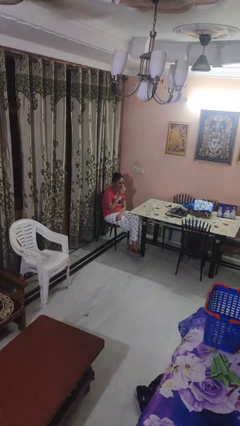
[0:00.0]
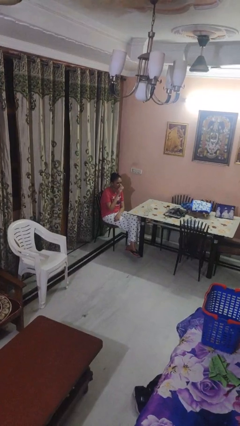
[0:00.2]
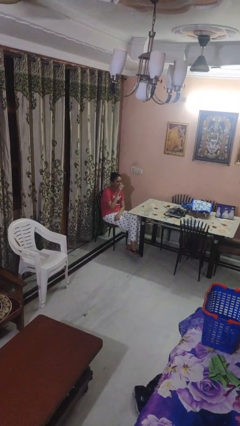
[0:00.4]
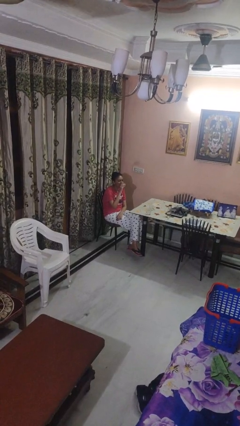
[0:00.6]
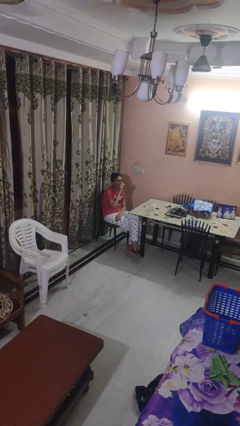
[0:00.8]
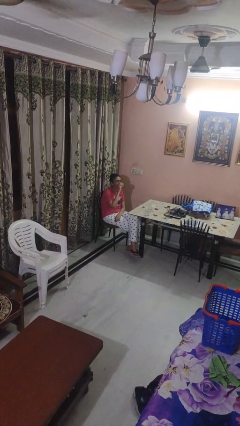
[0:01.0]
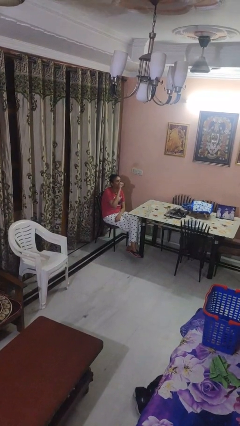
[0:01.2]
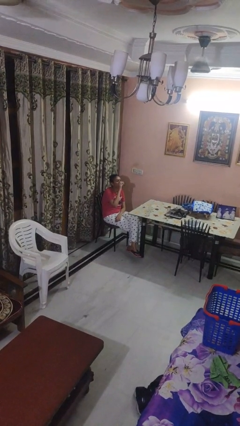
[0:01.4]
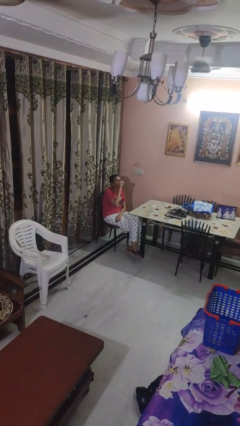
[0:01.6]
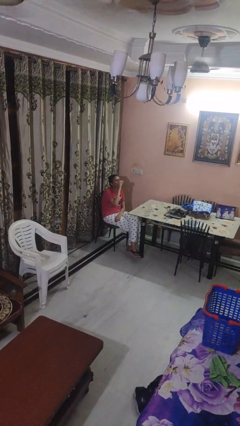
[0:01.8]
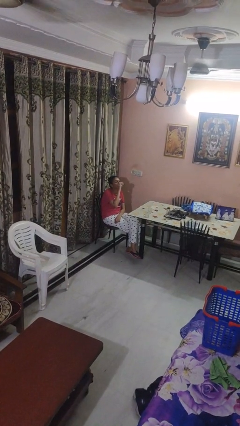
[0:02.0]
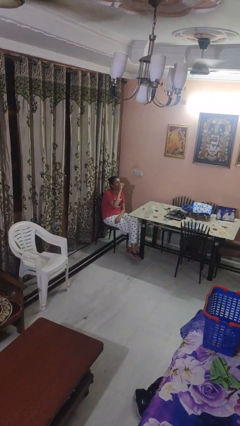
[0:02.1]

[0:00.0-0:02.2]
person drinks from shotglass

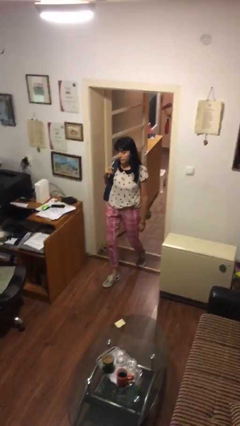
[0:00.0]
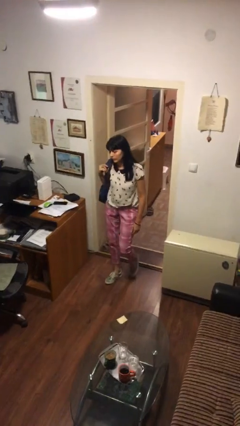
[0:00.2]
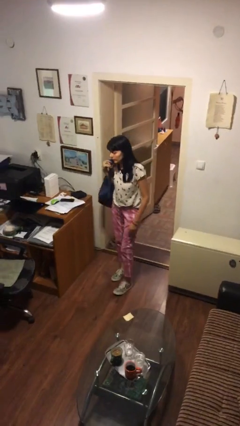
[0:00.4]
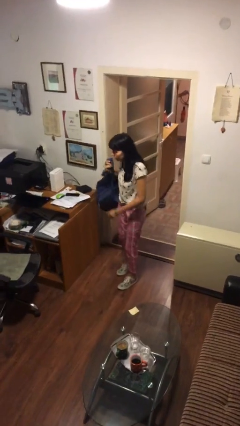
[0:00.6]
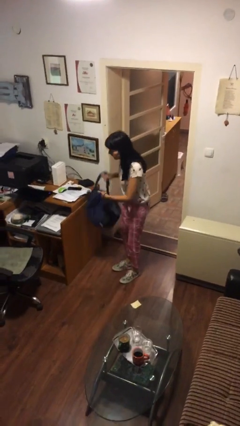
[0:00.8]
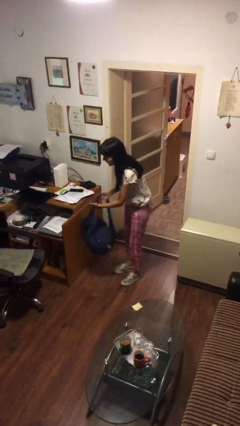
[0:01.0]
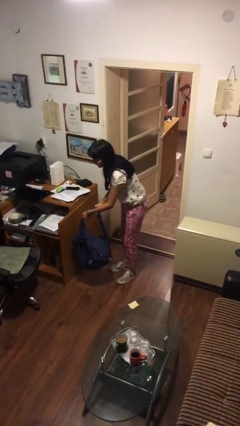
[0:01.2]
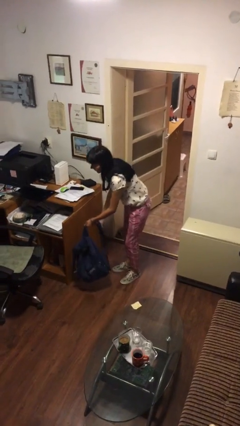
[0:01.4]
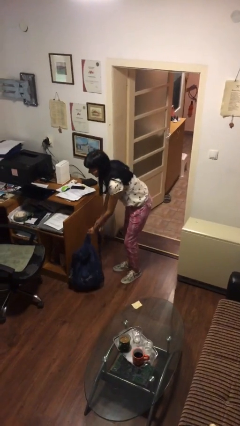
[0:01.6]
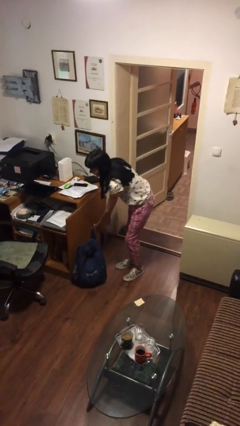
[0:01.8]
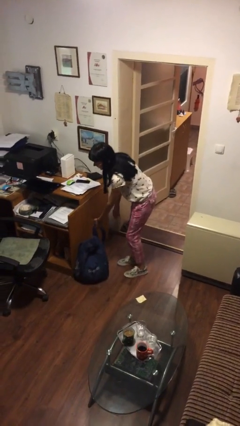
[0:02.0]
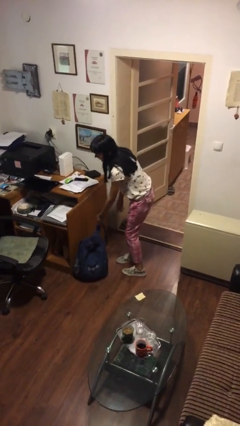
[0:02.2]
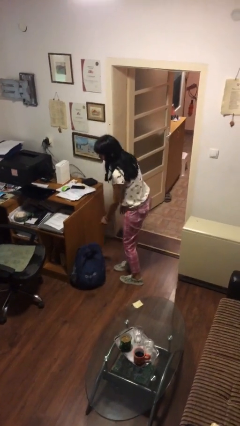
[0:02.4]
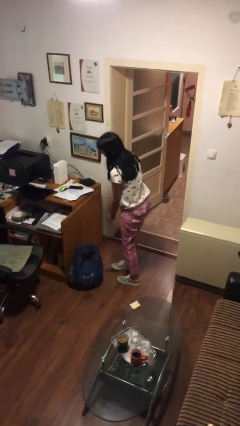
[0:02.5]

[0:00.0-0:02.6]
person puts down object on floor

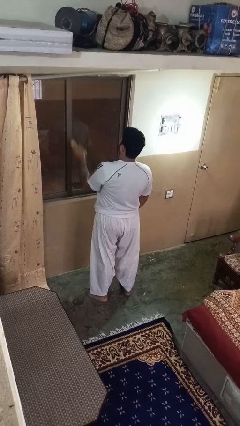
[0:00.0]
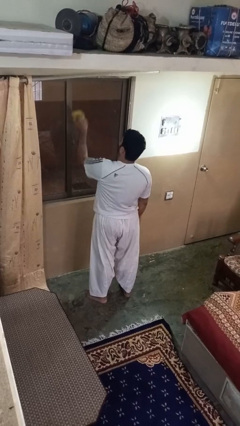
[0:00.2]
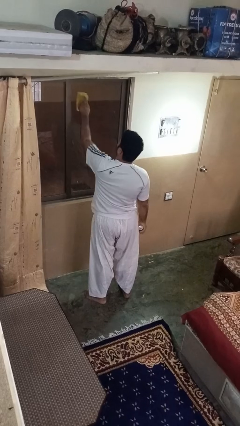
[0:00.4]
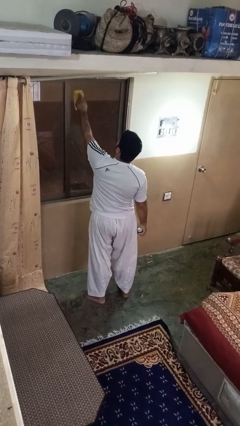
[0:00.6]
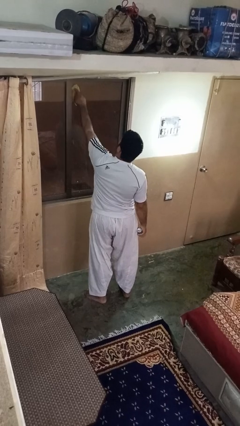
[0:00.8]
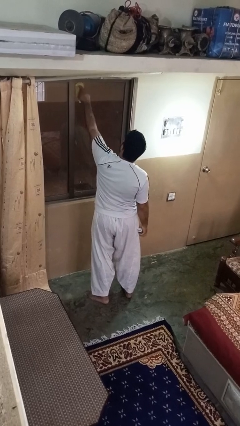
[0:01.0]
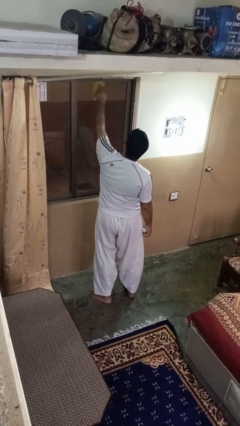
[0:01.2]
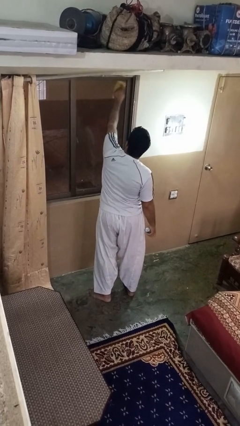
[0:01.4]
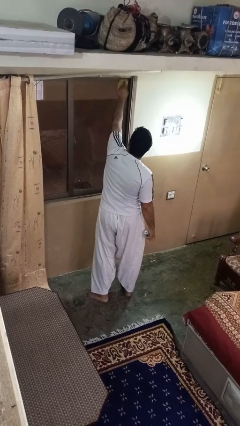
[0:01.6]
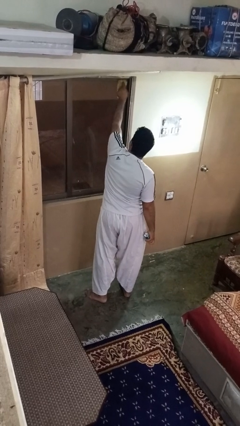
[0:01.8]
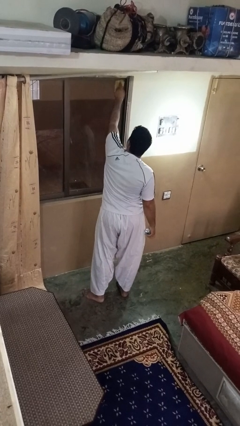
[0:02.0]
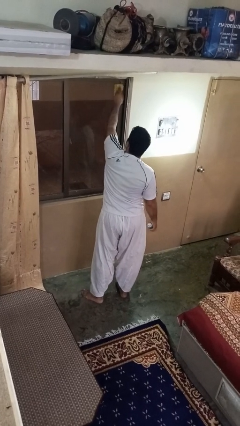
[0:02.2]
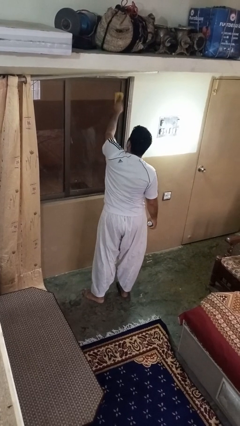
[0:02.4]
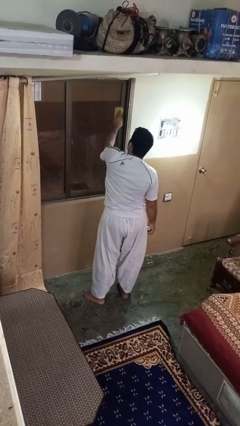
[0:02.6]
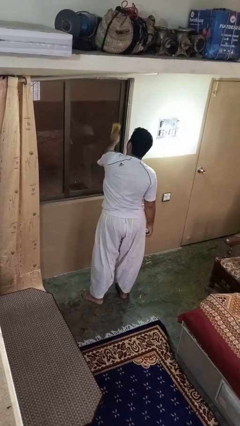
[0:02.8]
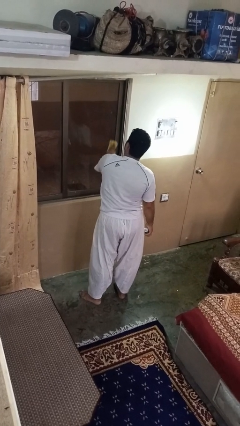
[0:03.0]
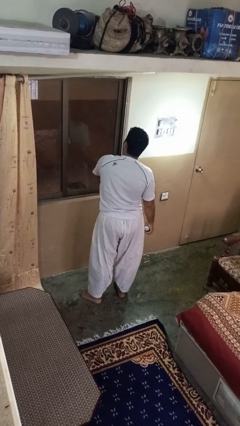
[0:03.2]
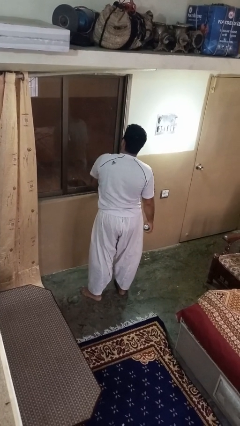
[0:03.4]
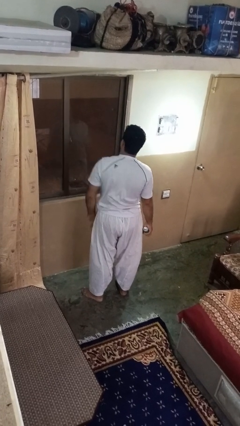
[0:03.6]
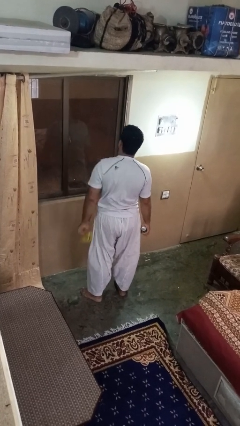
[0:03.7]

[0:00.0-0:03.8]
person washes window

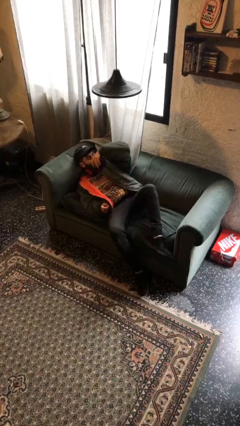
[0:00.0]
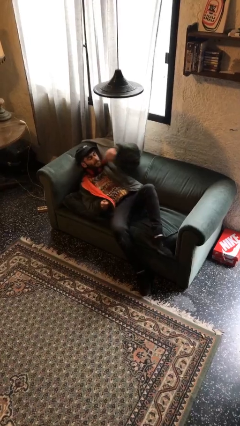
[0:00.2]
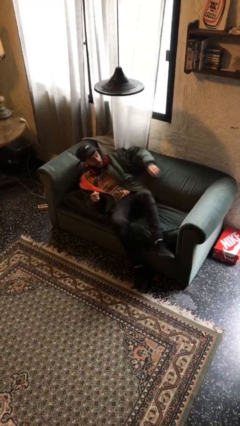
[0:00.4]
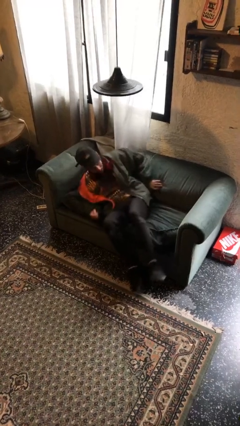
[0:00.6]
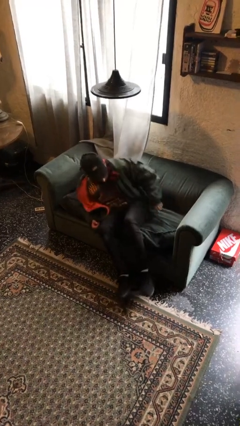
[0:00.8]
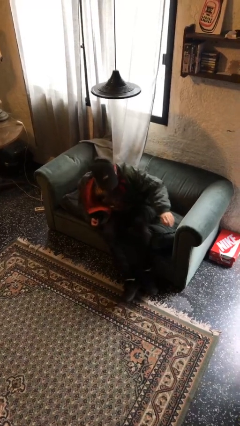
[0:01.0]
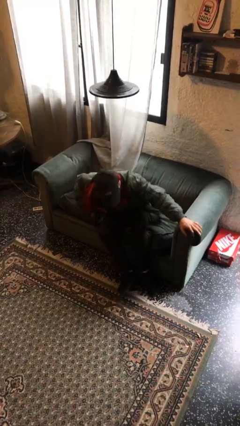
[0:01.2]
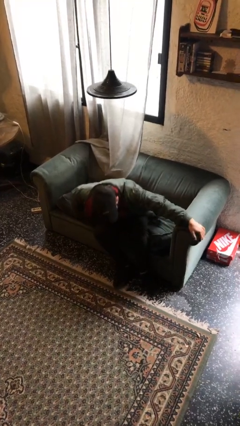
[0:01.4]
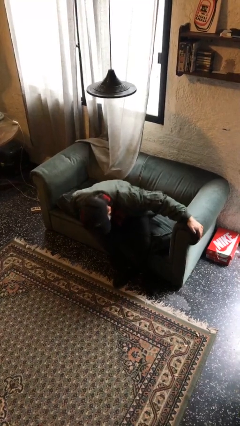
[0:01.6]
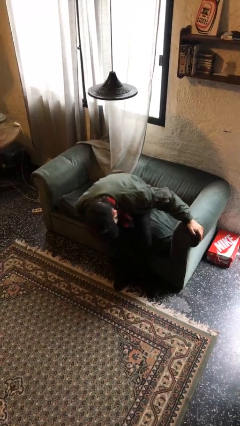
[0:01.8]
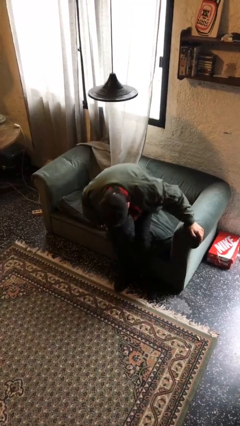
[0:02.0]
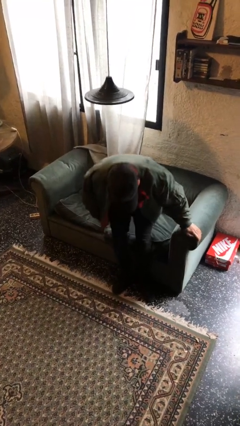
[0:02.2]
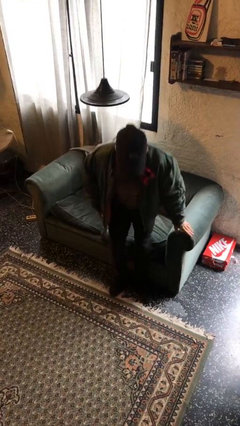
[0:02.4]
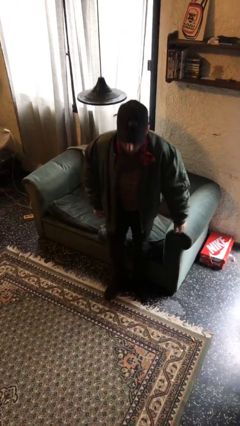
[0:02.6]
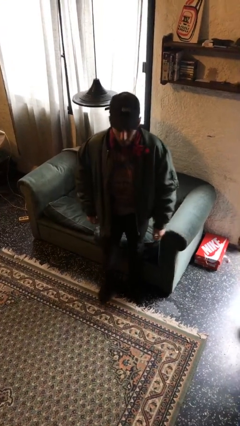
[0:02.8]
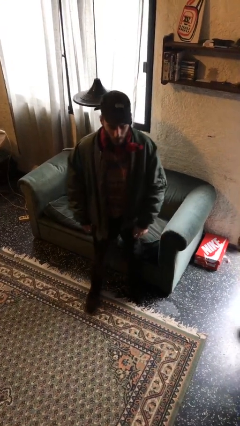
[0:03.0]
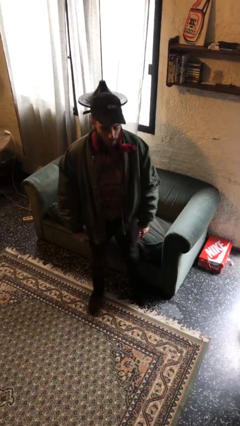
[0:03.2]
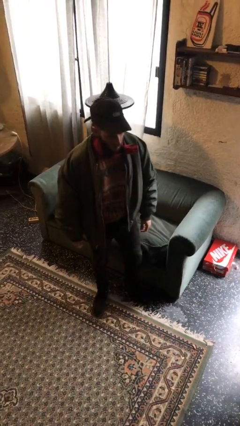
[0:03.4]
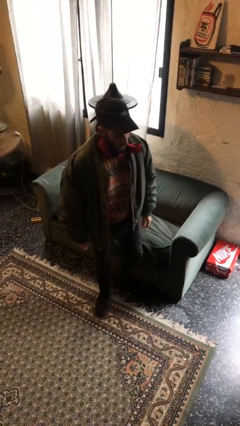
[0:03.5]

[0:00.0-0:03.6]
person stands up

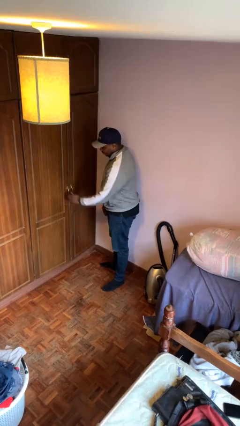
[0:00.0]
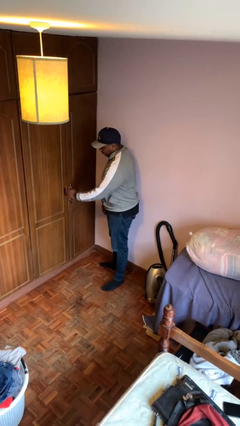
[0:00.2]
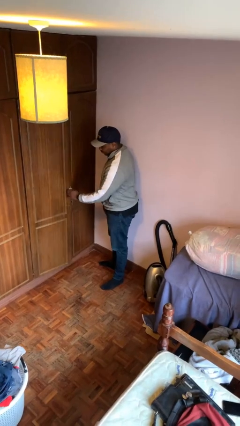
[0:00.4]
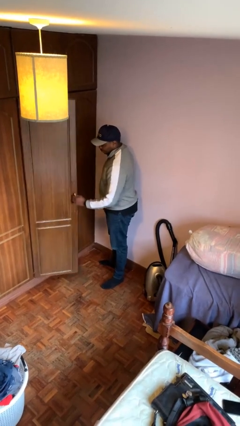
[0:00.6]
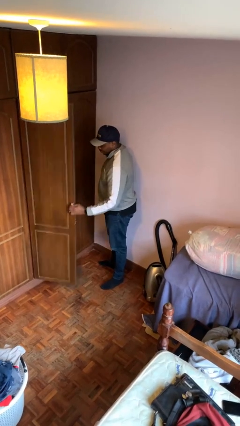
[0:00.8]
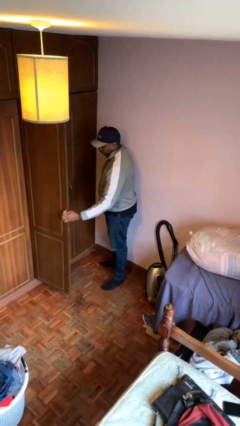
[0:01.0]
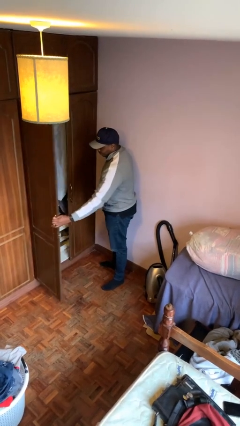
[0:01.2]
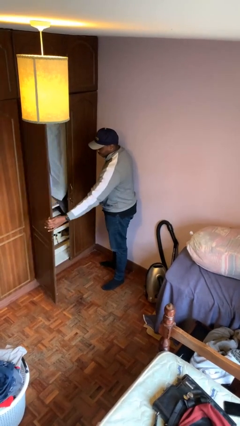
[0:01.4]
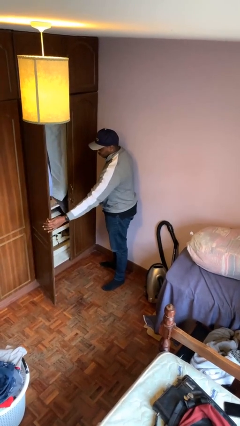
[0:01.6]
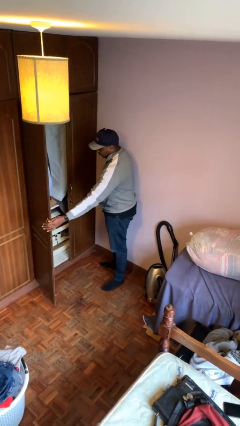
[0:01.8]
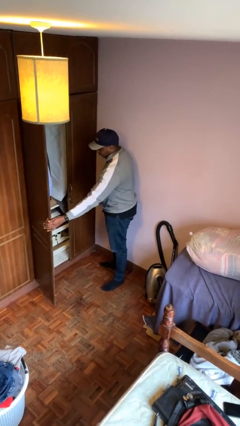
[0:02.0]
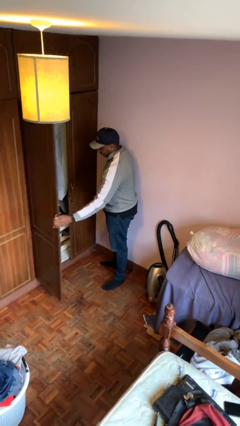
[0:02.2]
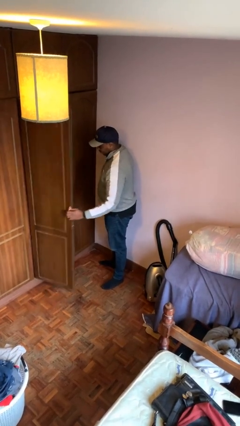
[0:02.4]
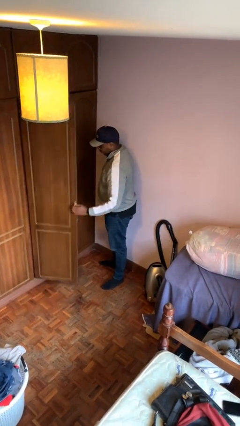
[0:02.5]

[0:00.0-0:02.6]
person opens closet door

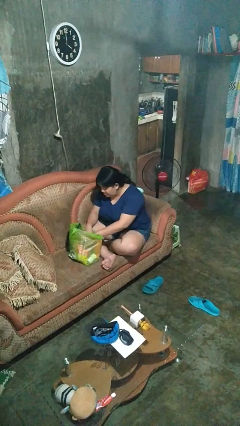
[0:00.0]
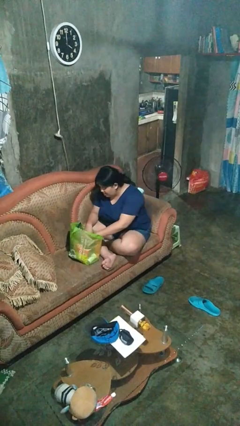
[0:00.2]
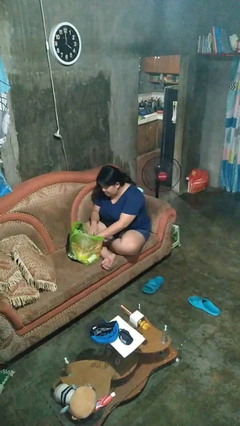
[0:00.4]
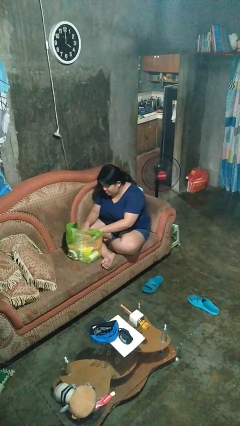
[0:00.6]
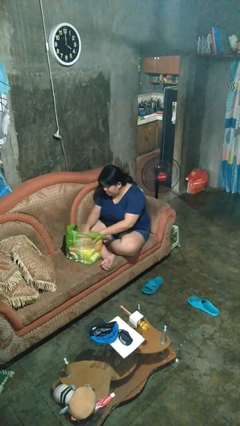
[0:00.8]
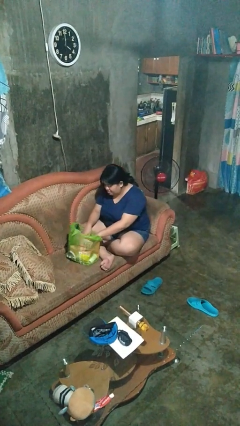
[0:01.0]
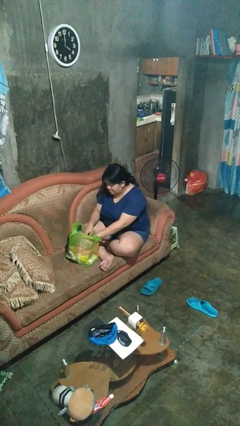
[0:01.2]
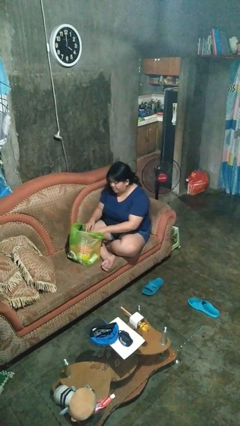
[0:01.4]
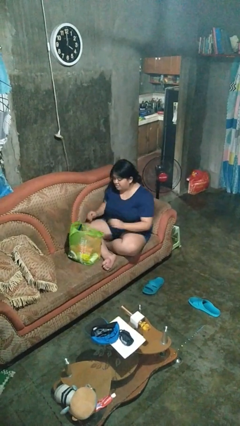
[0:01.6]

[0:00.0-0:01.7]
person searches in bag

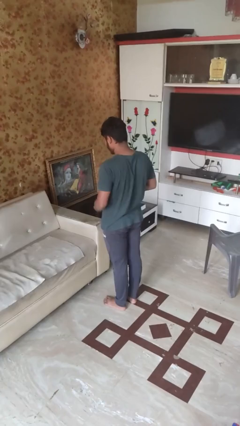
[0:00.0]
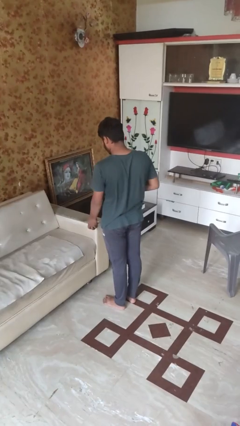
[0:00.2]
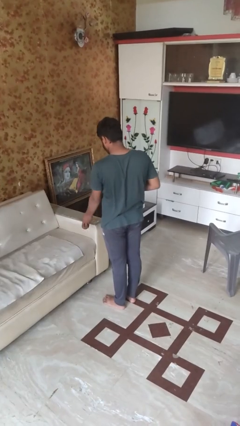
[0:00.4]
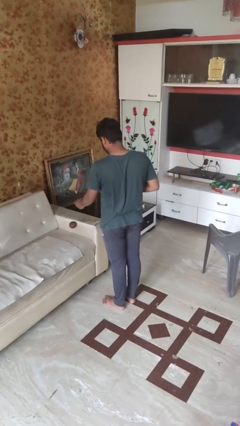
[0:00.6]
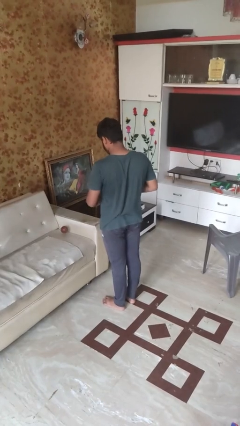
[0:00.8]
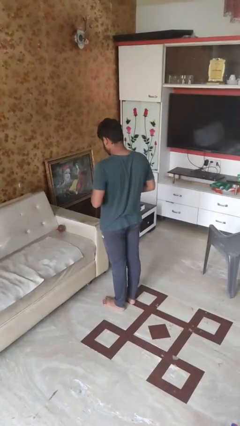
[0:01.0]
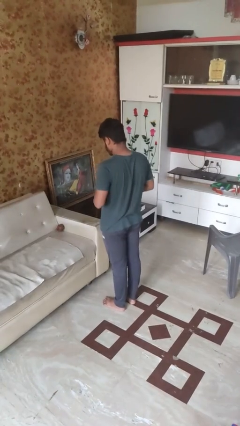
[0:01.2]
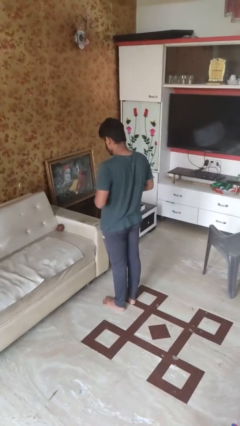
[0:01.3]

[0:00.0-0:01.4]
person throws object on bed
